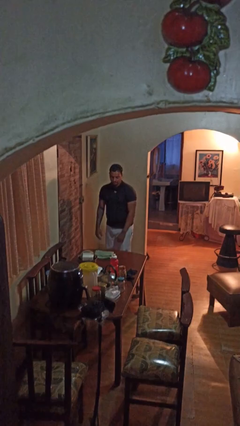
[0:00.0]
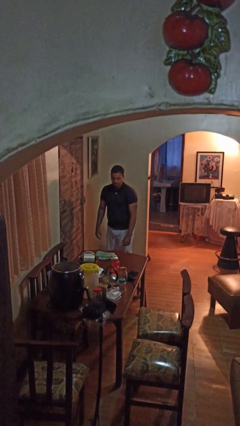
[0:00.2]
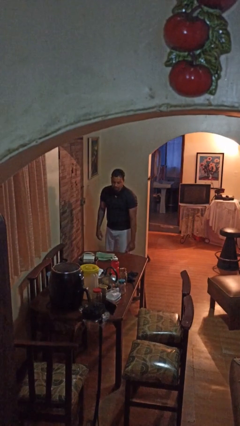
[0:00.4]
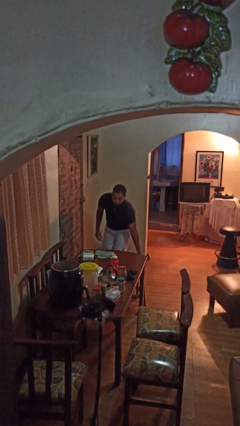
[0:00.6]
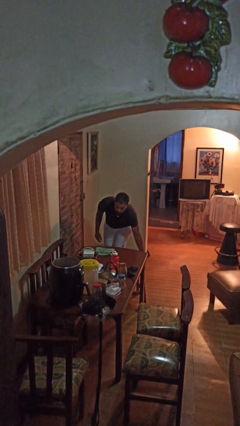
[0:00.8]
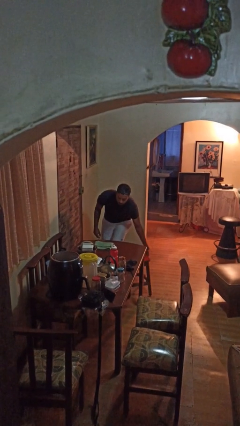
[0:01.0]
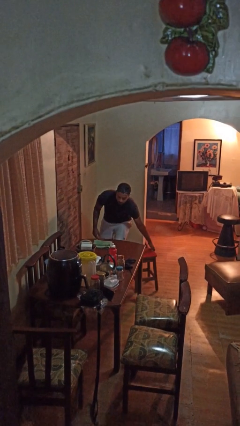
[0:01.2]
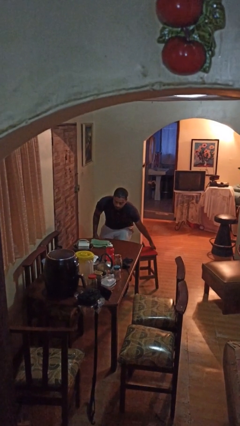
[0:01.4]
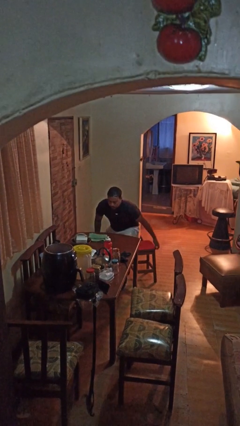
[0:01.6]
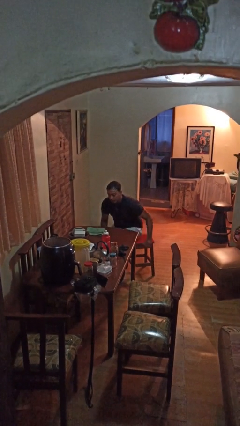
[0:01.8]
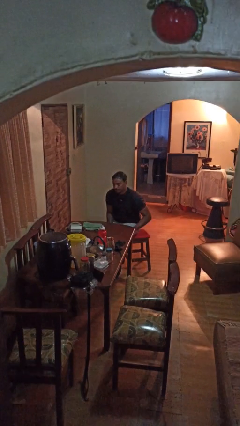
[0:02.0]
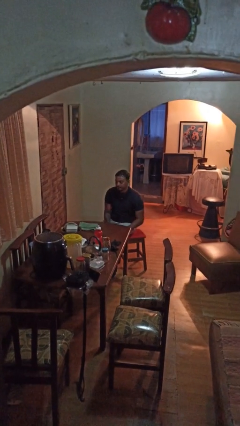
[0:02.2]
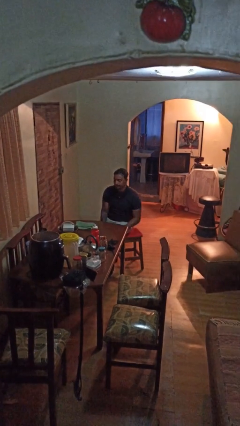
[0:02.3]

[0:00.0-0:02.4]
person sits down

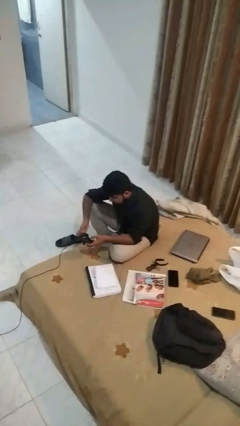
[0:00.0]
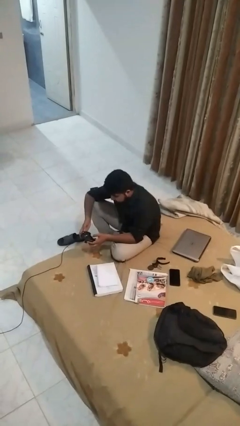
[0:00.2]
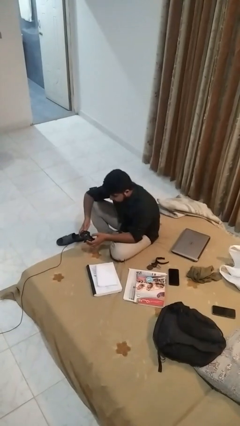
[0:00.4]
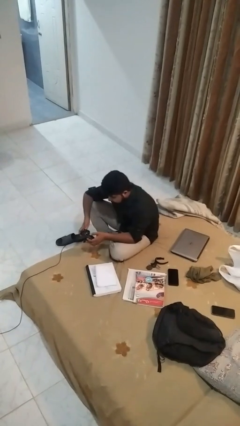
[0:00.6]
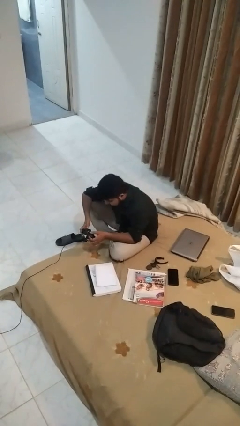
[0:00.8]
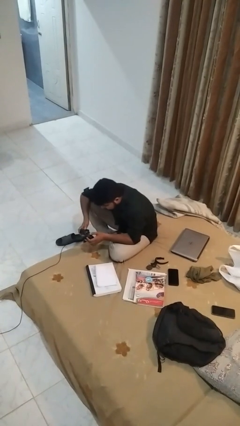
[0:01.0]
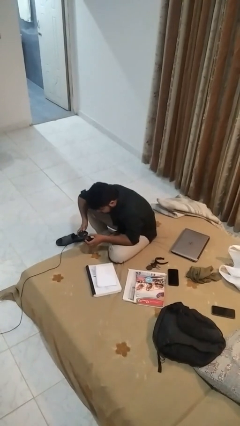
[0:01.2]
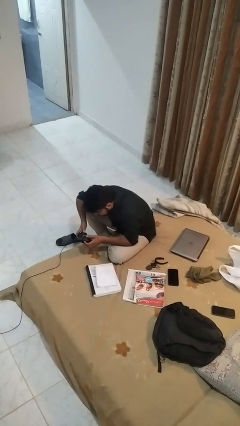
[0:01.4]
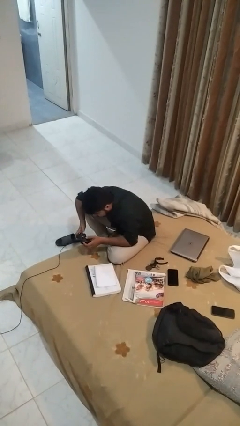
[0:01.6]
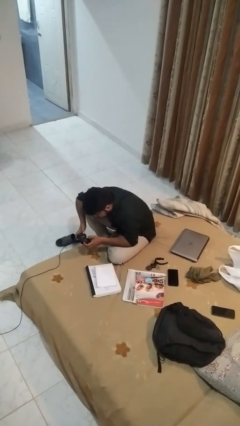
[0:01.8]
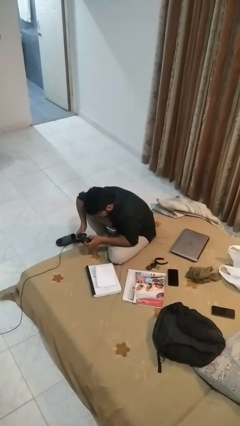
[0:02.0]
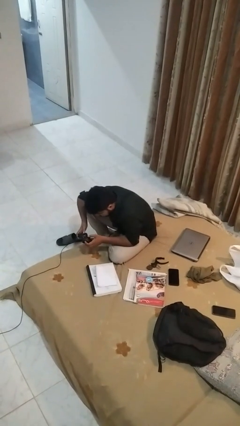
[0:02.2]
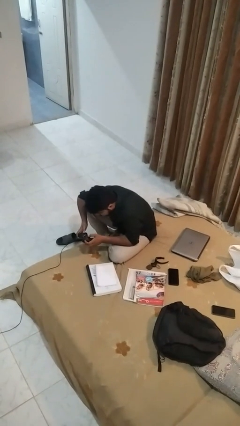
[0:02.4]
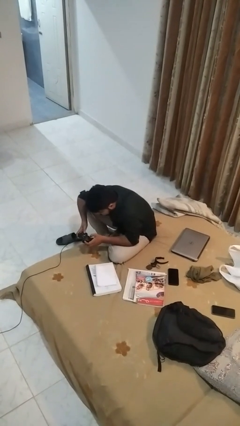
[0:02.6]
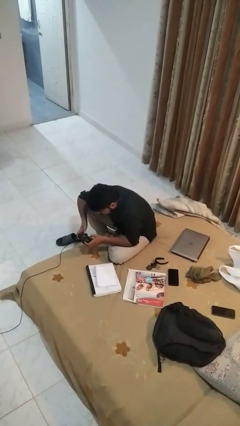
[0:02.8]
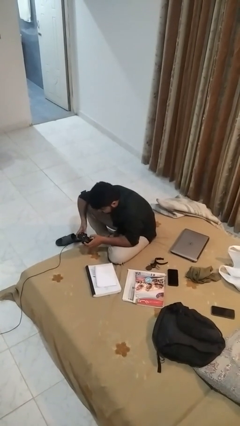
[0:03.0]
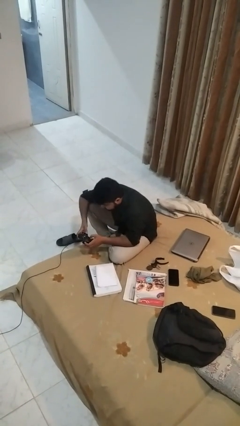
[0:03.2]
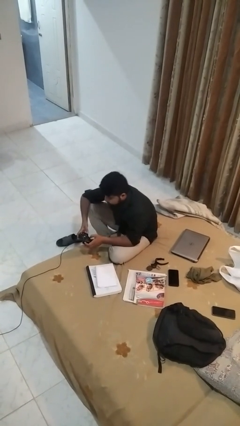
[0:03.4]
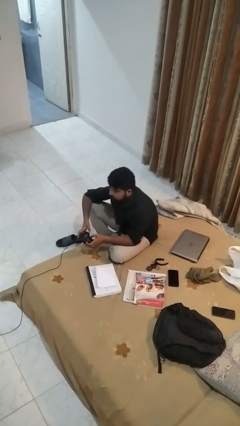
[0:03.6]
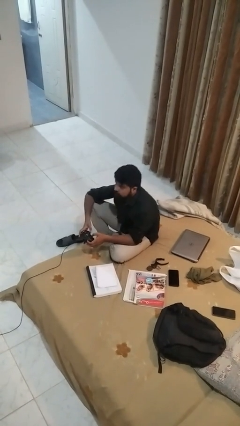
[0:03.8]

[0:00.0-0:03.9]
person interacts with handheld game

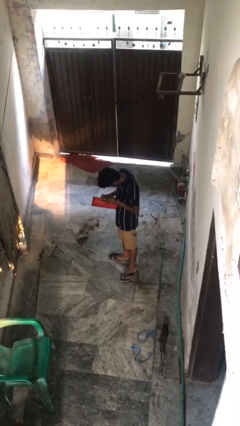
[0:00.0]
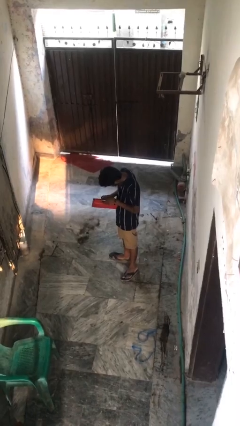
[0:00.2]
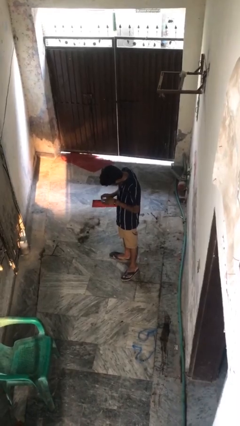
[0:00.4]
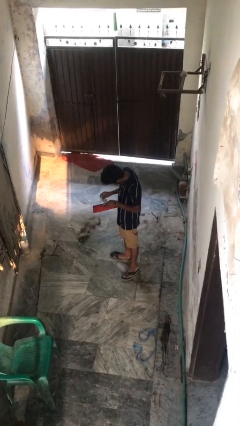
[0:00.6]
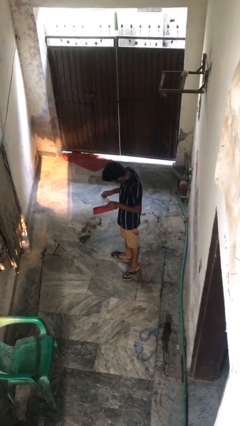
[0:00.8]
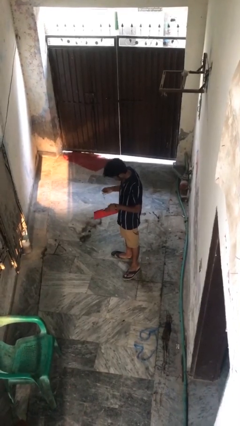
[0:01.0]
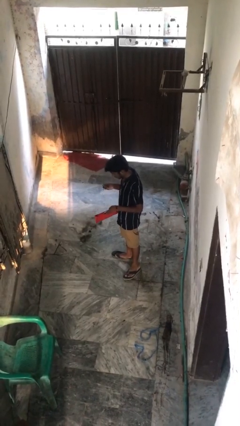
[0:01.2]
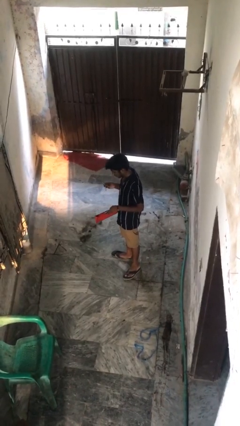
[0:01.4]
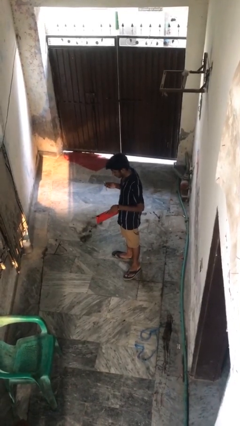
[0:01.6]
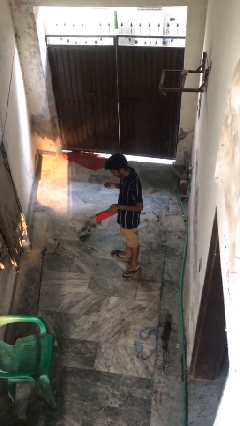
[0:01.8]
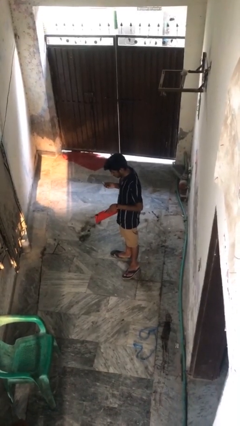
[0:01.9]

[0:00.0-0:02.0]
person takes object from purse

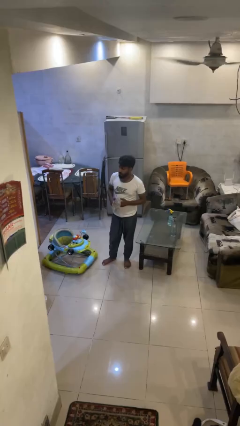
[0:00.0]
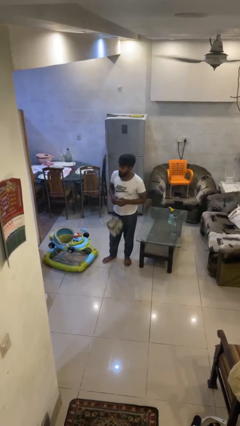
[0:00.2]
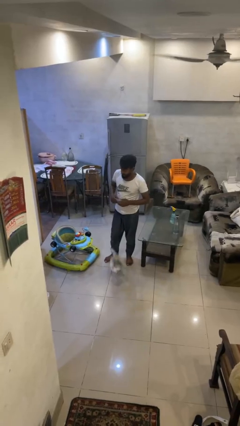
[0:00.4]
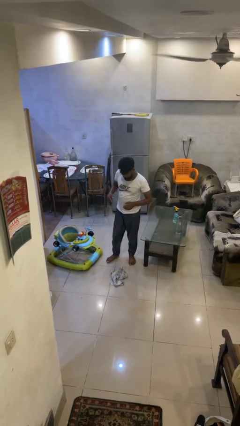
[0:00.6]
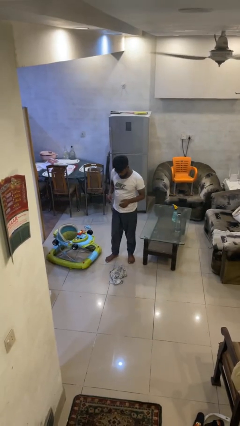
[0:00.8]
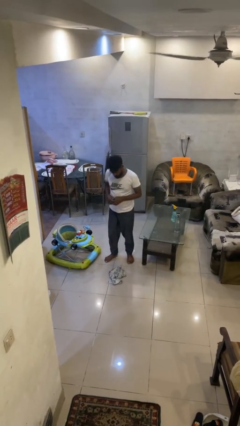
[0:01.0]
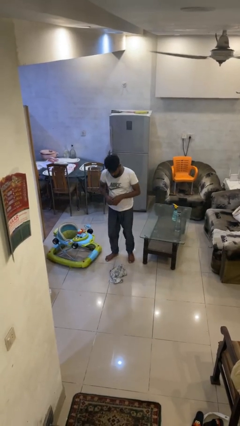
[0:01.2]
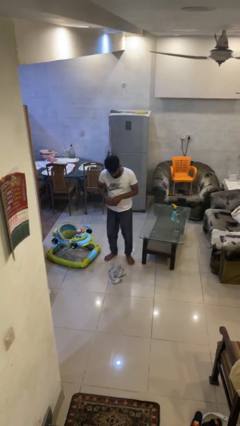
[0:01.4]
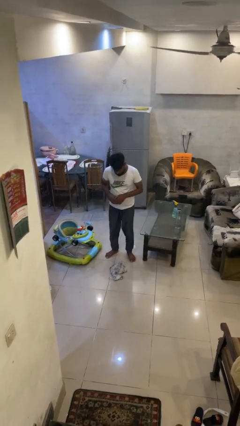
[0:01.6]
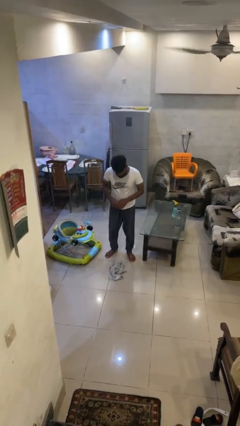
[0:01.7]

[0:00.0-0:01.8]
person drops object

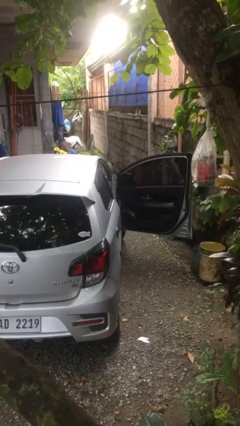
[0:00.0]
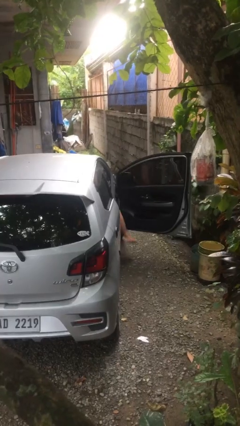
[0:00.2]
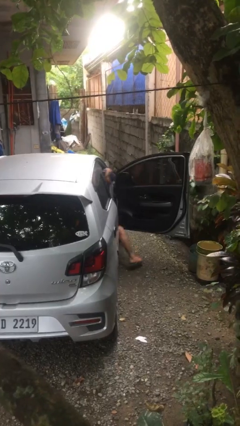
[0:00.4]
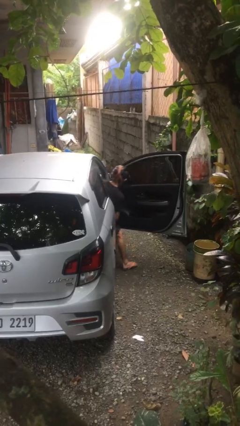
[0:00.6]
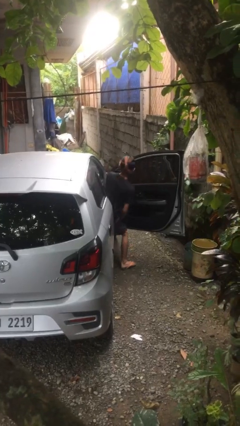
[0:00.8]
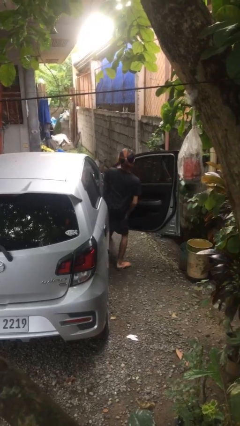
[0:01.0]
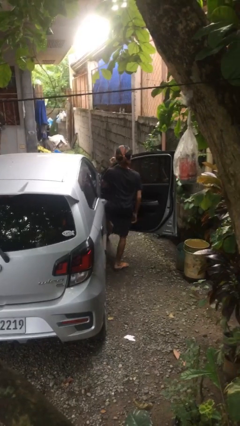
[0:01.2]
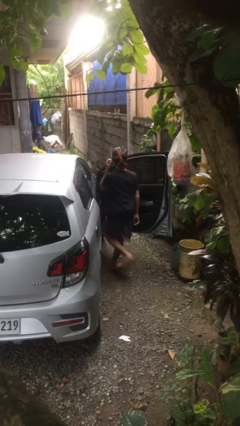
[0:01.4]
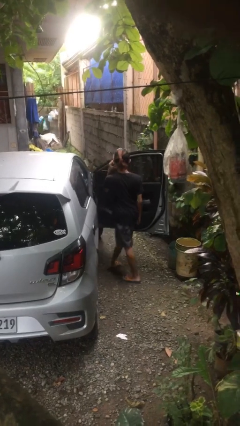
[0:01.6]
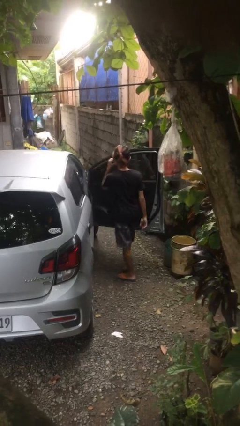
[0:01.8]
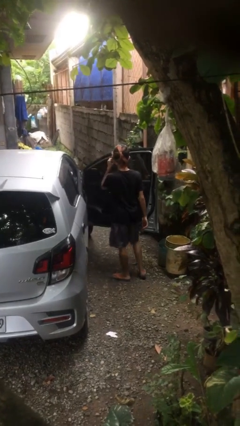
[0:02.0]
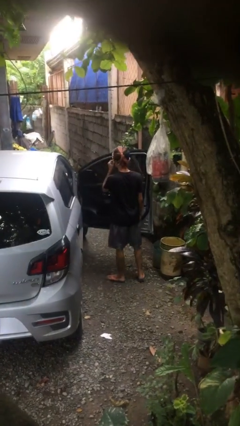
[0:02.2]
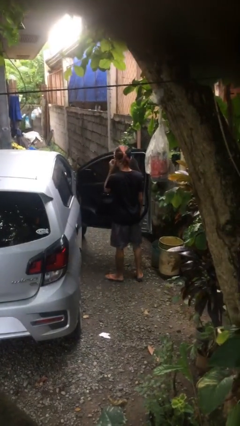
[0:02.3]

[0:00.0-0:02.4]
person exits car

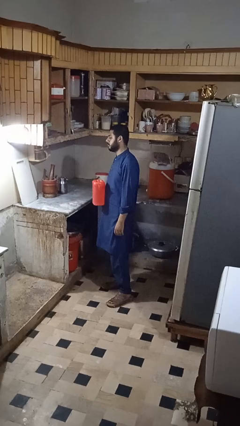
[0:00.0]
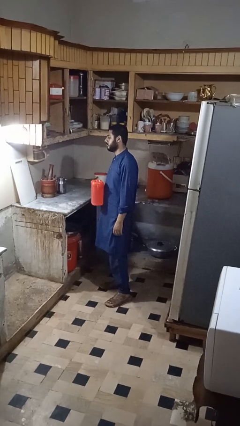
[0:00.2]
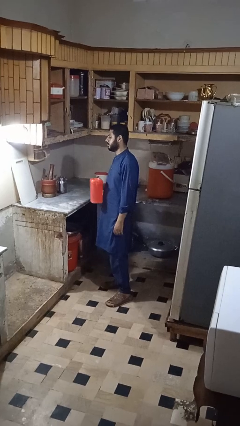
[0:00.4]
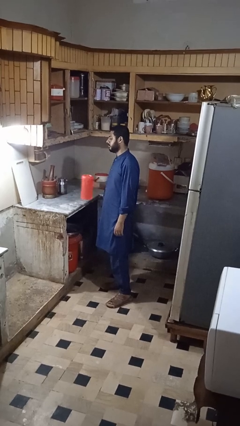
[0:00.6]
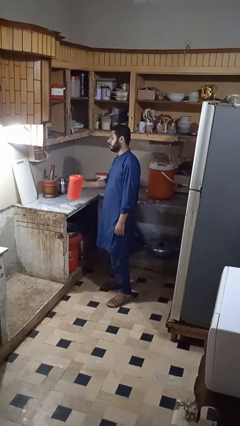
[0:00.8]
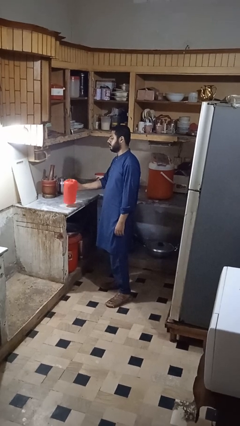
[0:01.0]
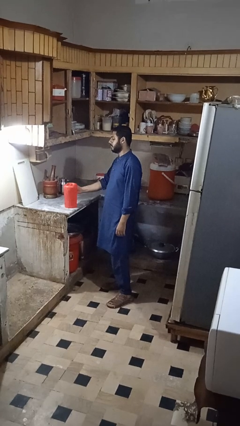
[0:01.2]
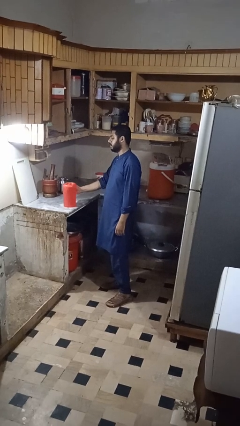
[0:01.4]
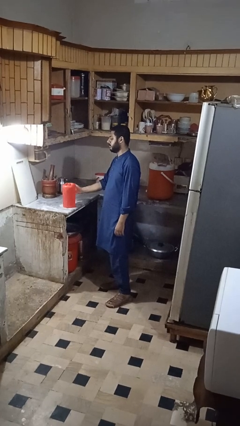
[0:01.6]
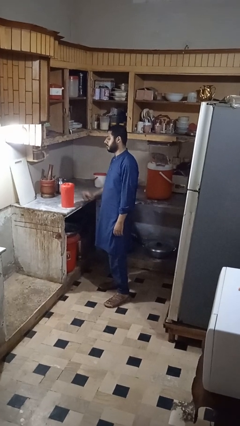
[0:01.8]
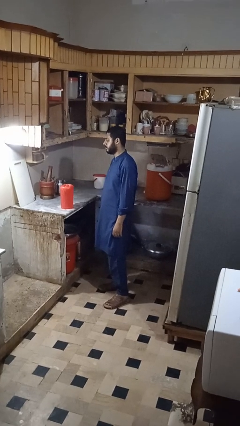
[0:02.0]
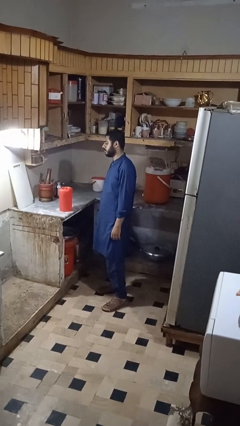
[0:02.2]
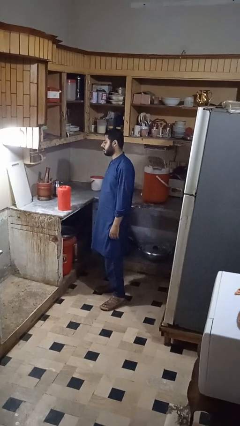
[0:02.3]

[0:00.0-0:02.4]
person puts down object on countertop

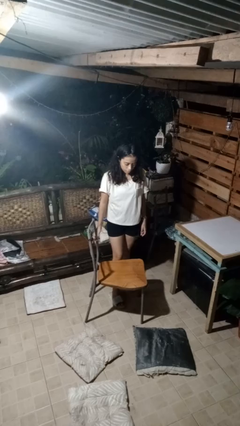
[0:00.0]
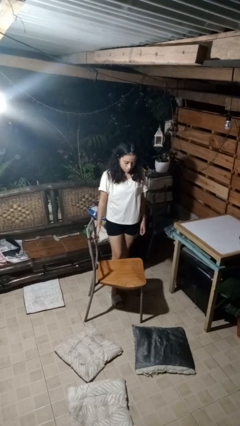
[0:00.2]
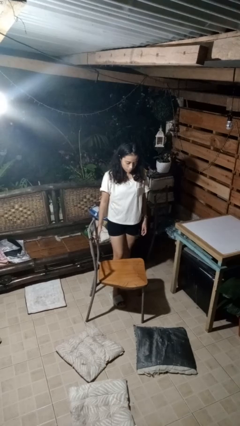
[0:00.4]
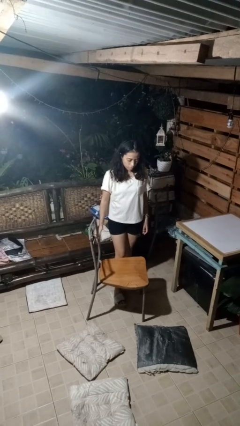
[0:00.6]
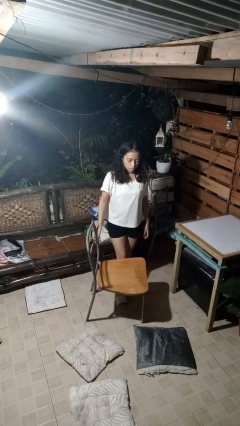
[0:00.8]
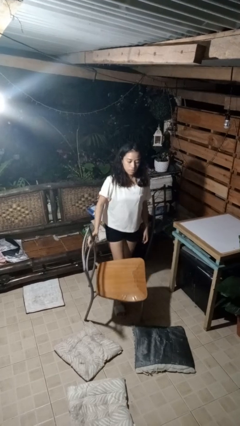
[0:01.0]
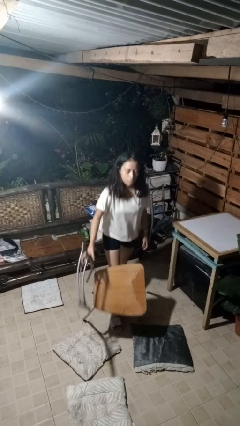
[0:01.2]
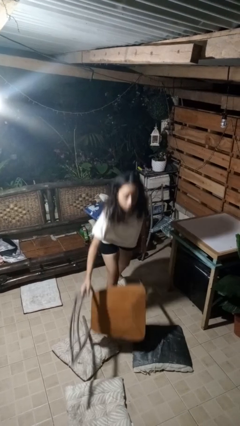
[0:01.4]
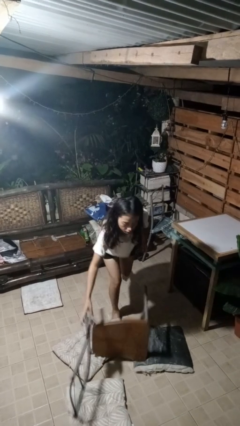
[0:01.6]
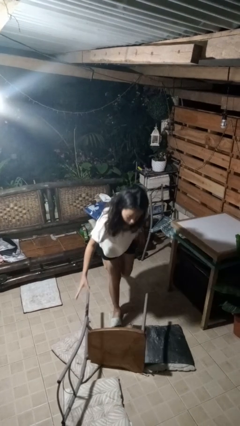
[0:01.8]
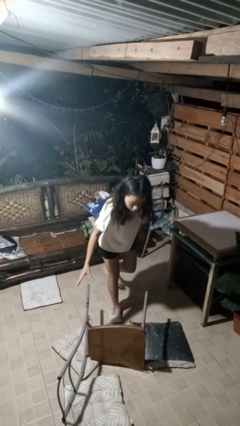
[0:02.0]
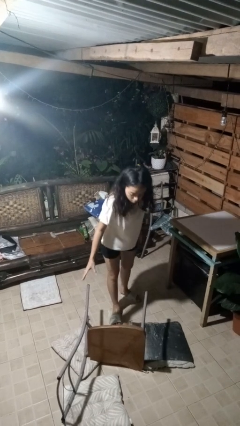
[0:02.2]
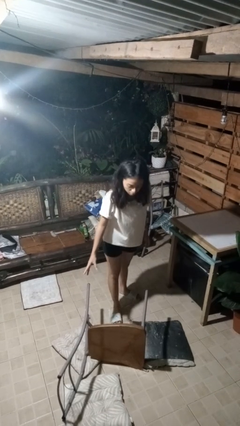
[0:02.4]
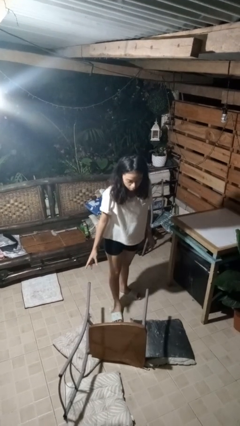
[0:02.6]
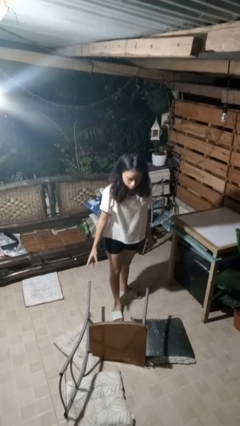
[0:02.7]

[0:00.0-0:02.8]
person knocks over furniture
